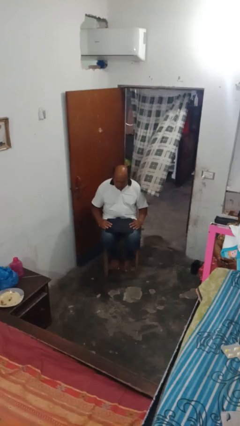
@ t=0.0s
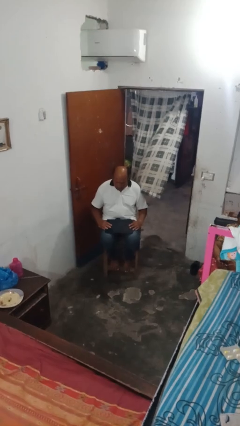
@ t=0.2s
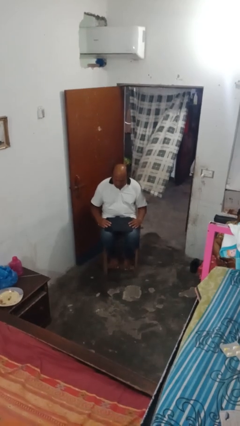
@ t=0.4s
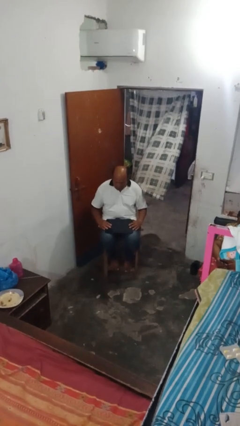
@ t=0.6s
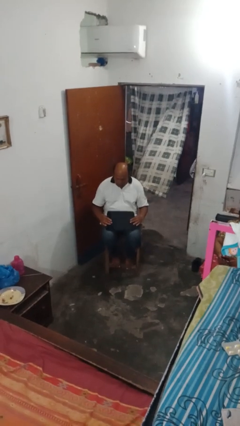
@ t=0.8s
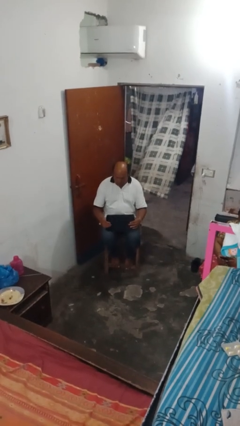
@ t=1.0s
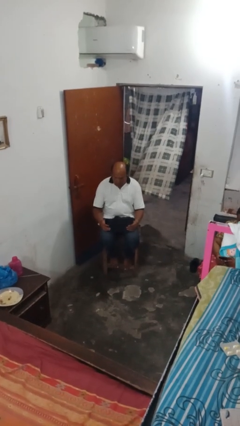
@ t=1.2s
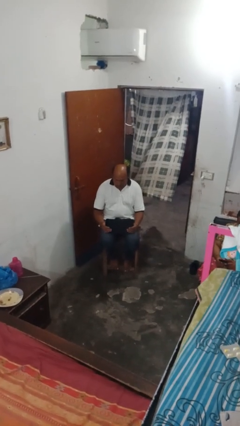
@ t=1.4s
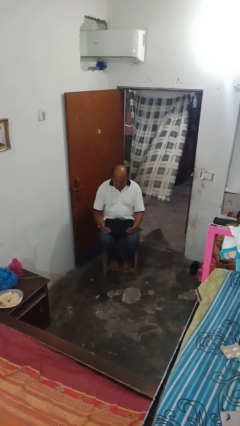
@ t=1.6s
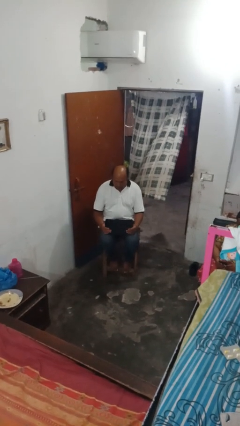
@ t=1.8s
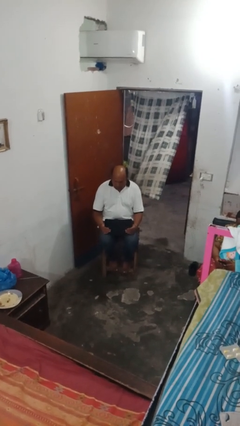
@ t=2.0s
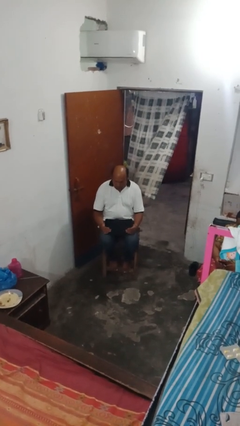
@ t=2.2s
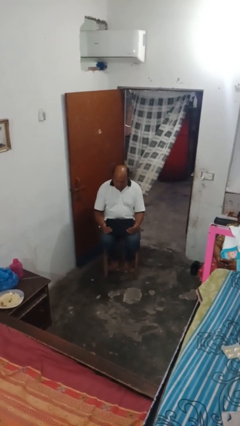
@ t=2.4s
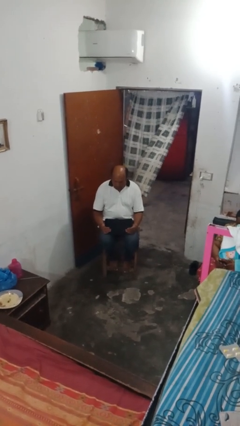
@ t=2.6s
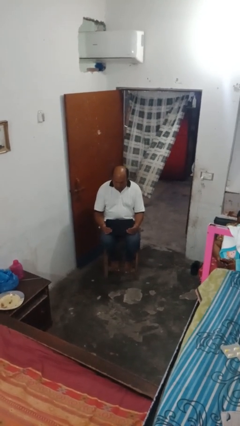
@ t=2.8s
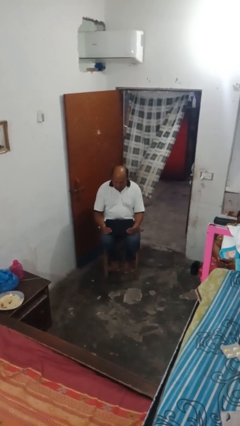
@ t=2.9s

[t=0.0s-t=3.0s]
person opens laptop

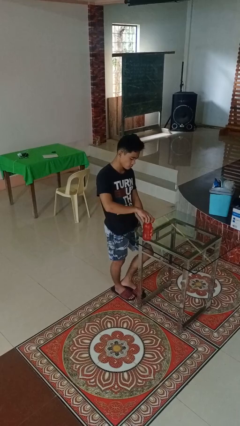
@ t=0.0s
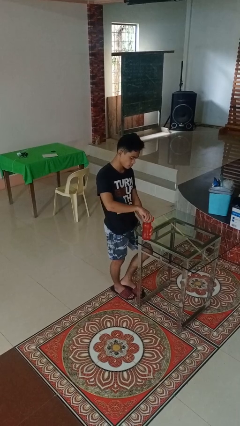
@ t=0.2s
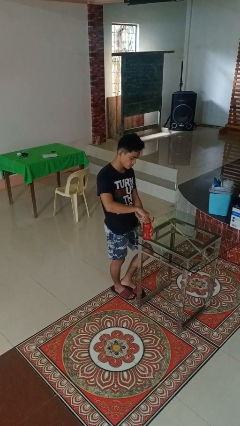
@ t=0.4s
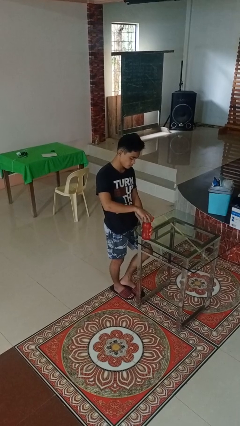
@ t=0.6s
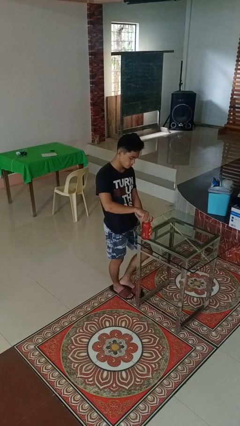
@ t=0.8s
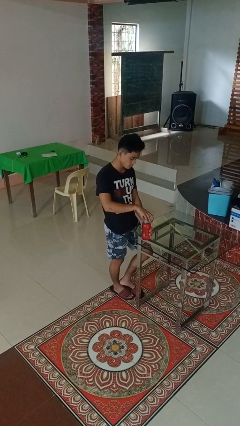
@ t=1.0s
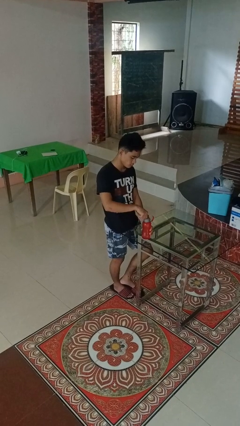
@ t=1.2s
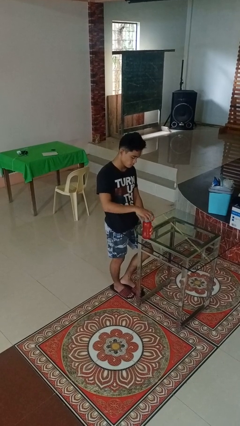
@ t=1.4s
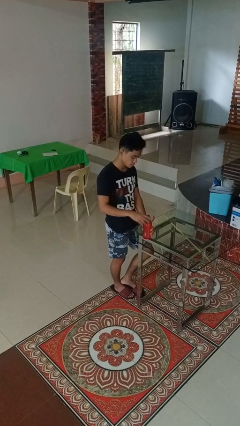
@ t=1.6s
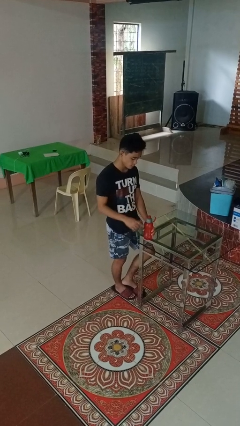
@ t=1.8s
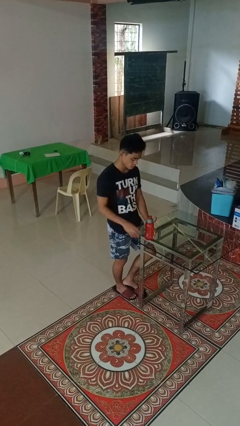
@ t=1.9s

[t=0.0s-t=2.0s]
person screws lid to bottle

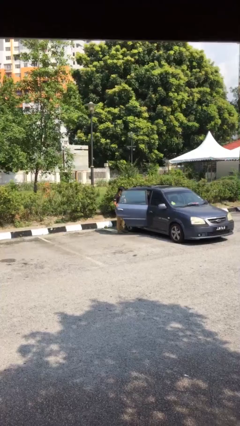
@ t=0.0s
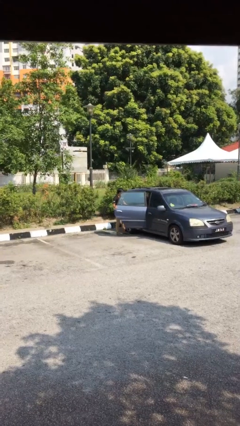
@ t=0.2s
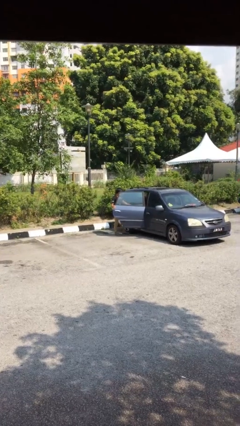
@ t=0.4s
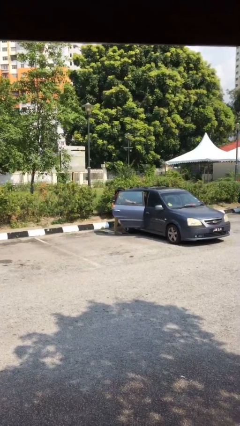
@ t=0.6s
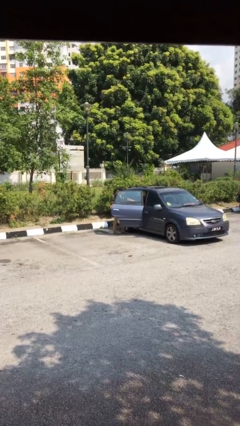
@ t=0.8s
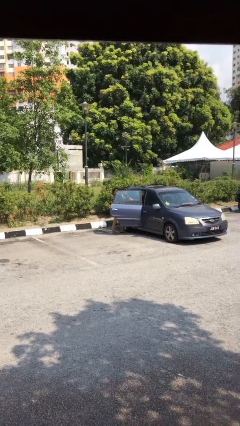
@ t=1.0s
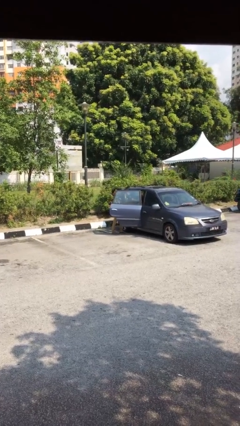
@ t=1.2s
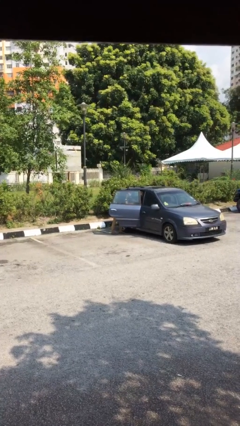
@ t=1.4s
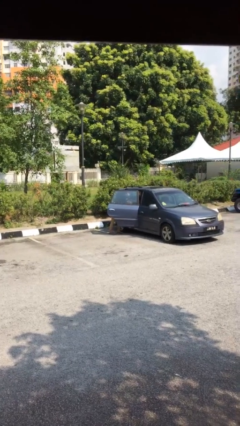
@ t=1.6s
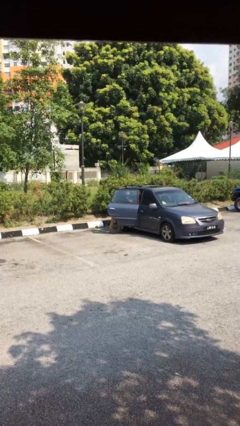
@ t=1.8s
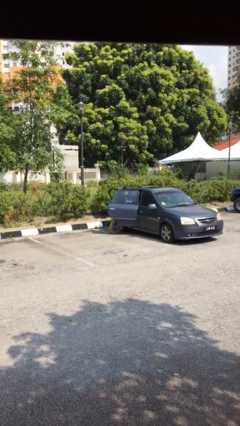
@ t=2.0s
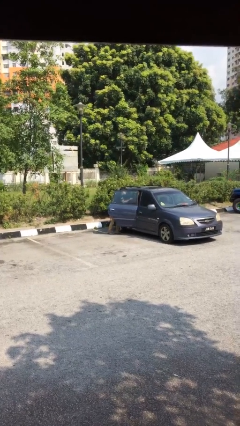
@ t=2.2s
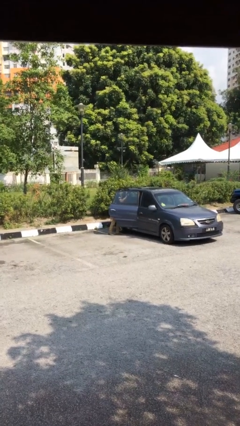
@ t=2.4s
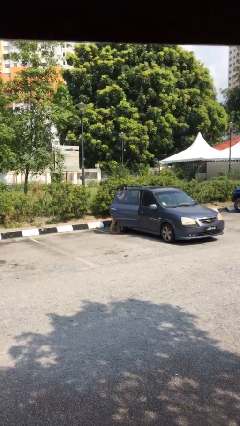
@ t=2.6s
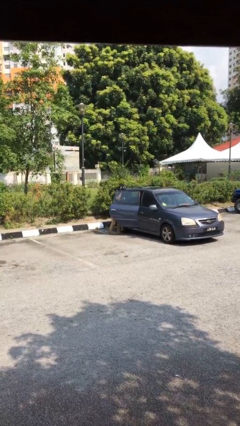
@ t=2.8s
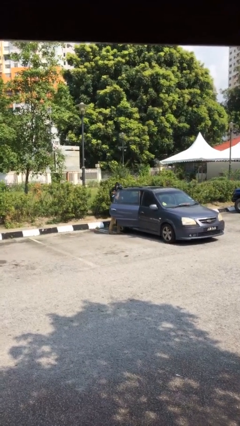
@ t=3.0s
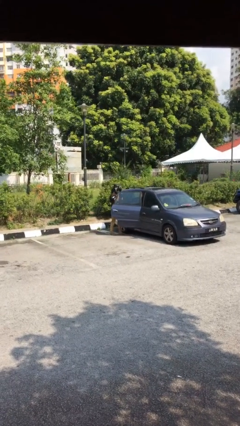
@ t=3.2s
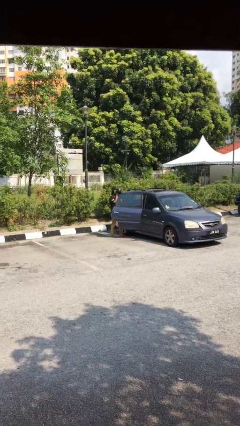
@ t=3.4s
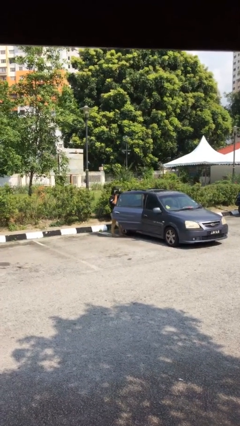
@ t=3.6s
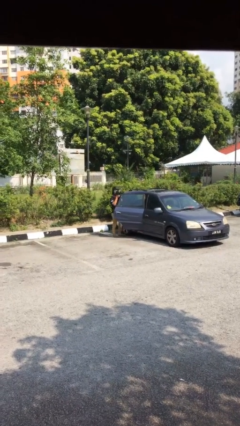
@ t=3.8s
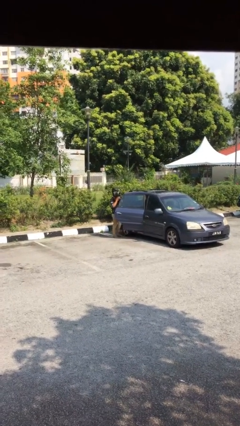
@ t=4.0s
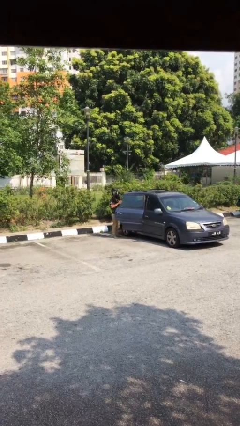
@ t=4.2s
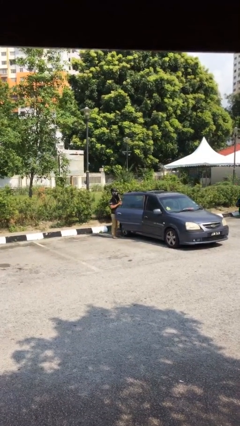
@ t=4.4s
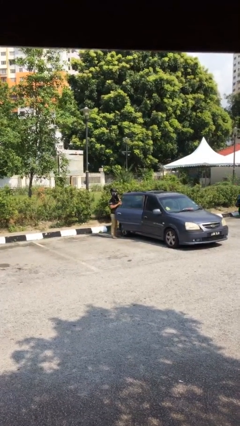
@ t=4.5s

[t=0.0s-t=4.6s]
person unloads car

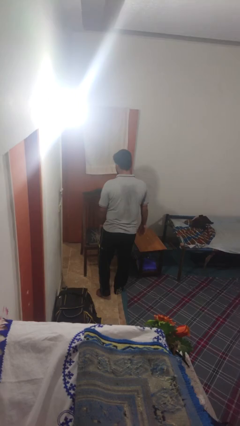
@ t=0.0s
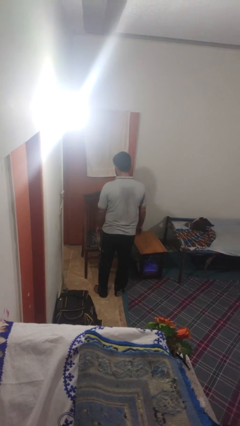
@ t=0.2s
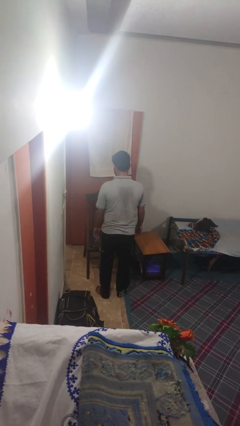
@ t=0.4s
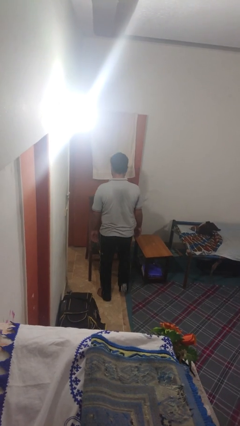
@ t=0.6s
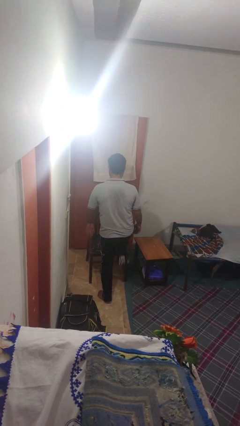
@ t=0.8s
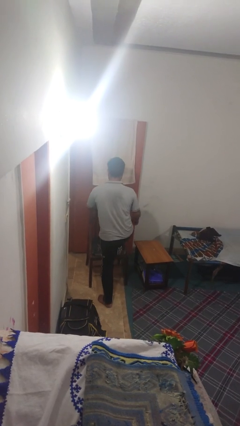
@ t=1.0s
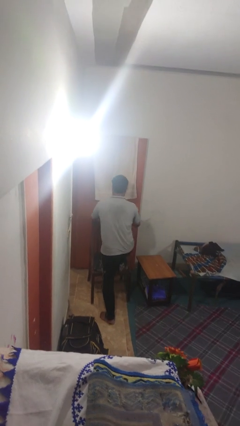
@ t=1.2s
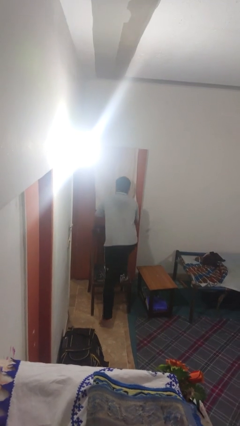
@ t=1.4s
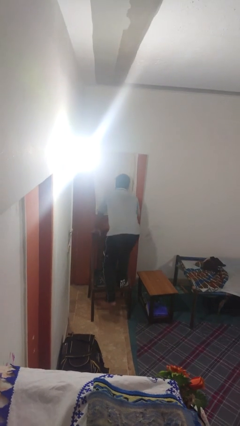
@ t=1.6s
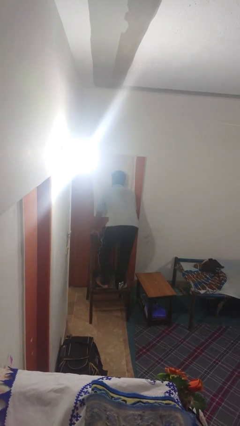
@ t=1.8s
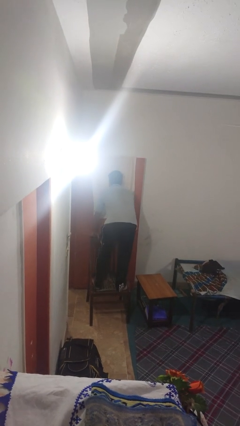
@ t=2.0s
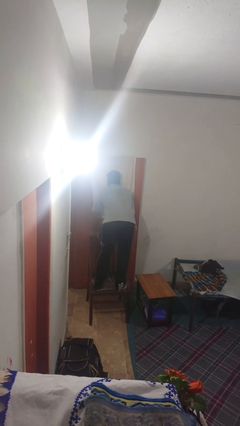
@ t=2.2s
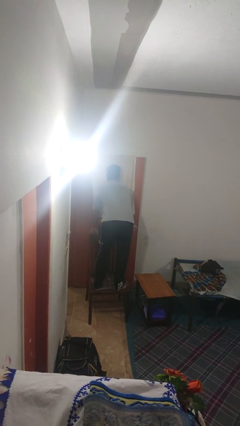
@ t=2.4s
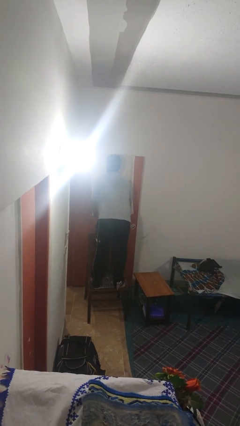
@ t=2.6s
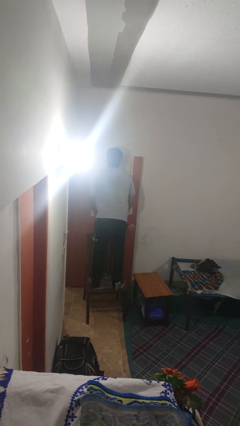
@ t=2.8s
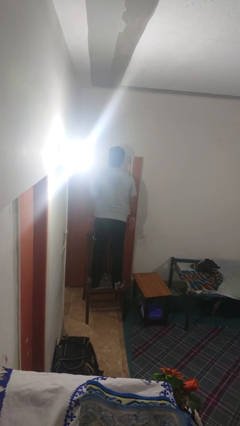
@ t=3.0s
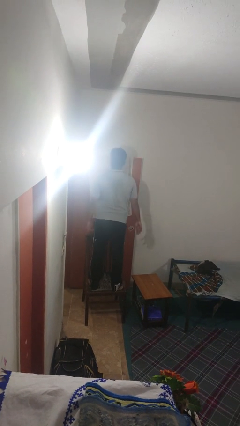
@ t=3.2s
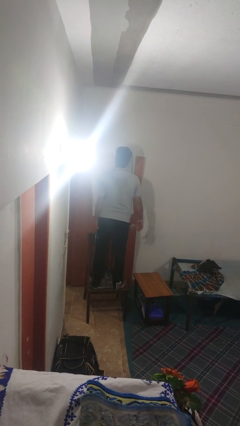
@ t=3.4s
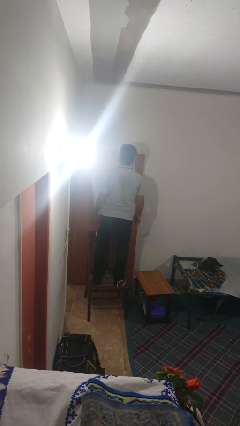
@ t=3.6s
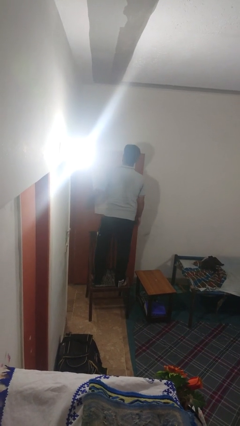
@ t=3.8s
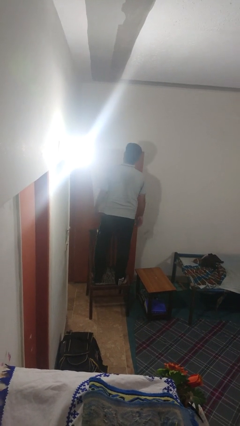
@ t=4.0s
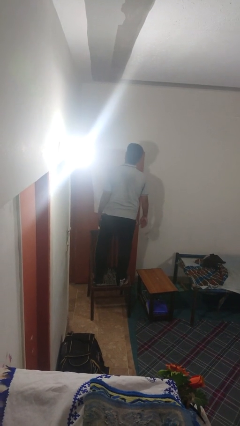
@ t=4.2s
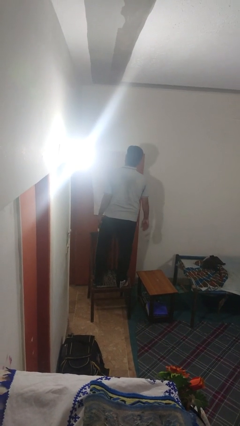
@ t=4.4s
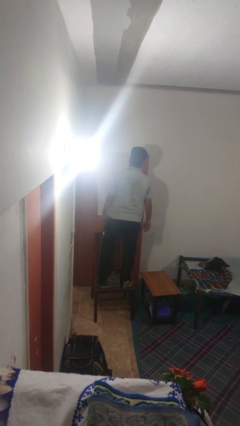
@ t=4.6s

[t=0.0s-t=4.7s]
person climbs on chair

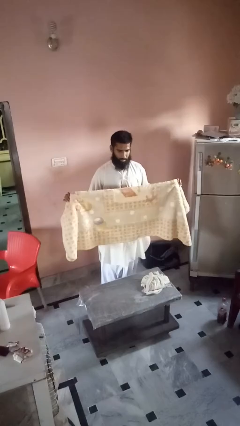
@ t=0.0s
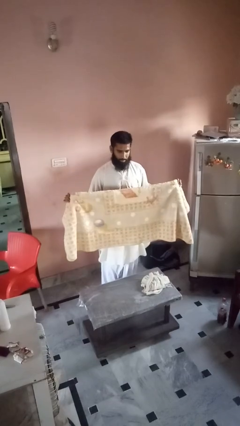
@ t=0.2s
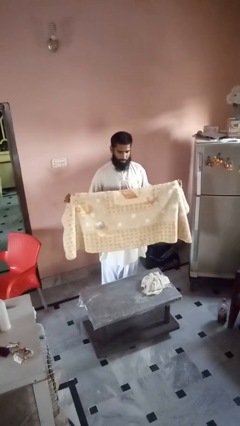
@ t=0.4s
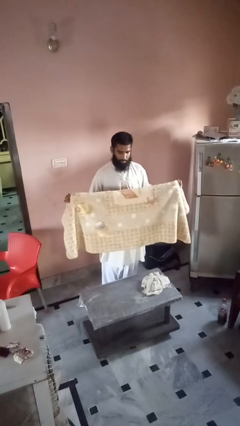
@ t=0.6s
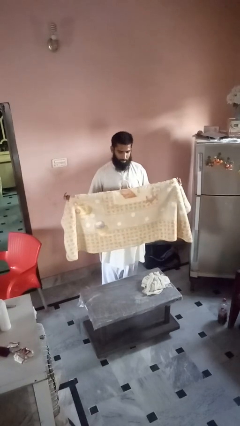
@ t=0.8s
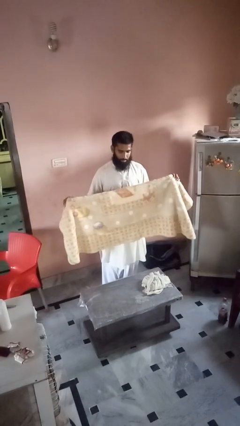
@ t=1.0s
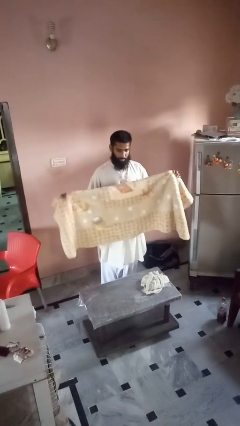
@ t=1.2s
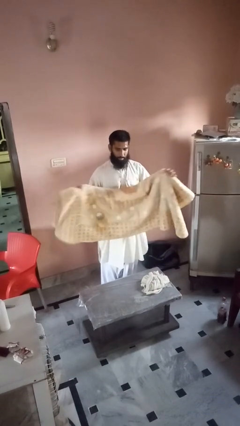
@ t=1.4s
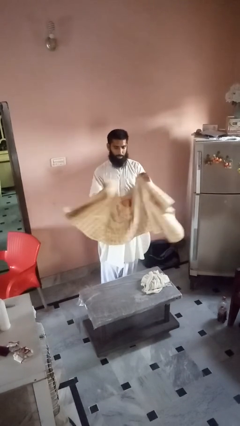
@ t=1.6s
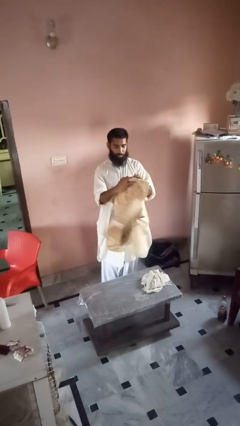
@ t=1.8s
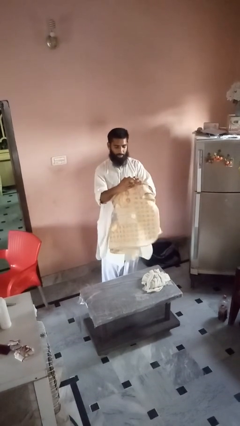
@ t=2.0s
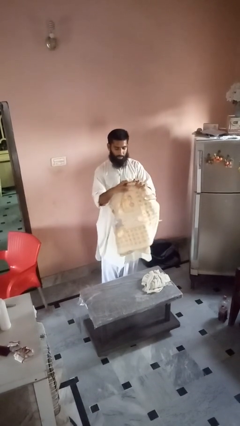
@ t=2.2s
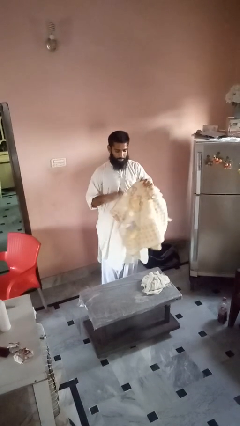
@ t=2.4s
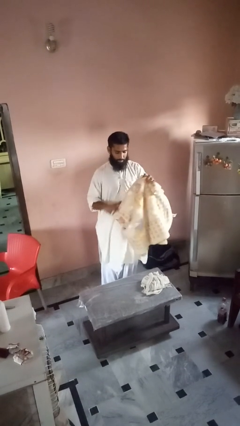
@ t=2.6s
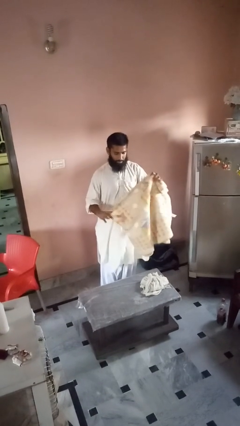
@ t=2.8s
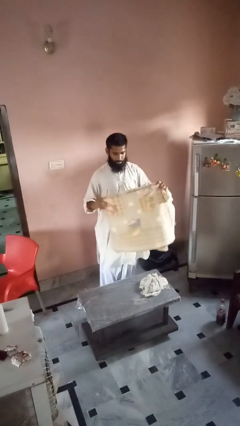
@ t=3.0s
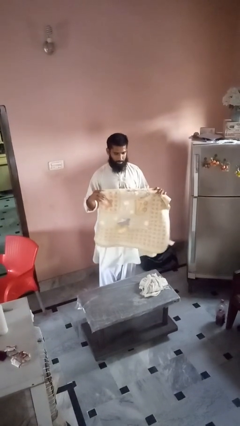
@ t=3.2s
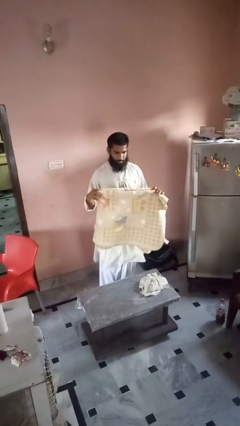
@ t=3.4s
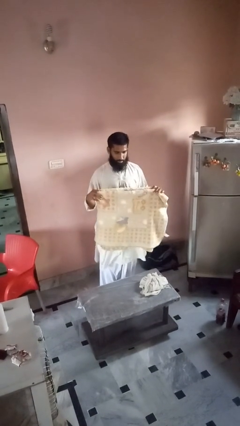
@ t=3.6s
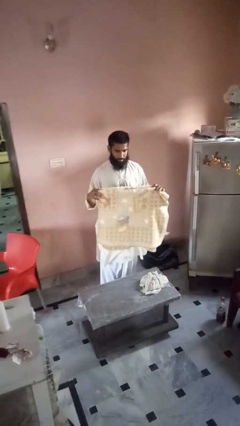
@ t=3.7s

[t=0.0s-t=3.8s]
person folds blanket
